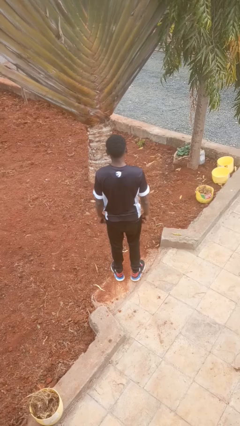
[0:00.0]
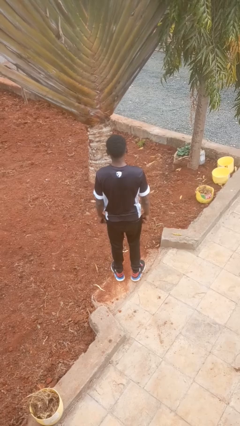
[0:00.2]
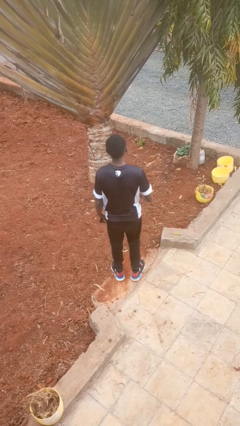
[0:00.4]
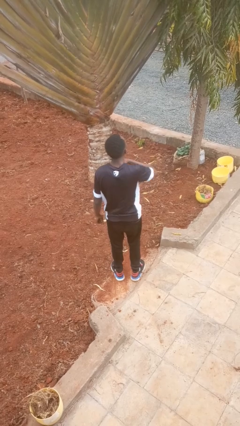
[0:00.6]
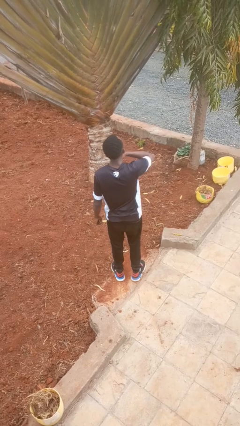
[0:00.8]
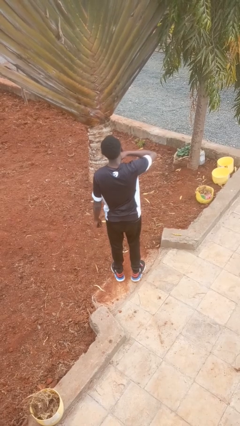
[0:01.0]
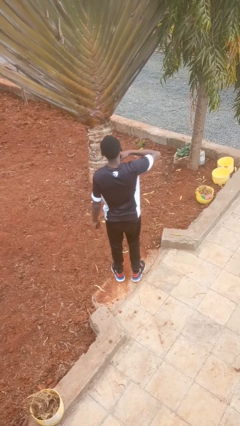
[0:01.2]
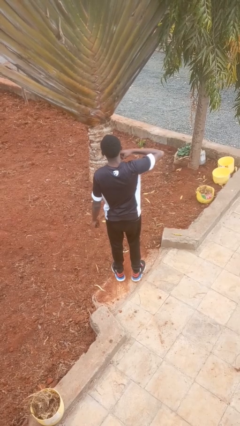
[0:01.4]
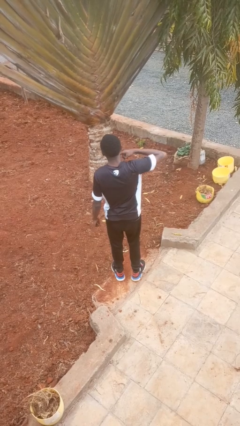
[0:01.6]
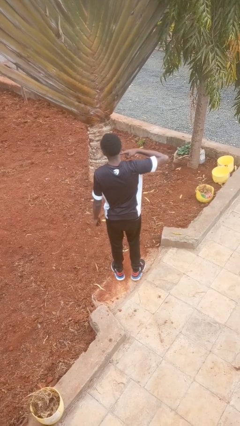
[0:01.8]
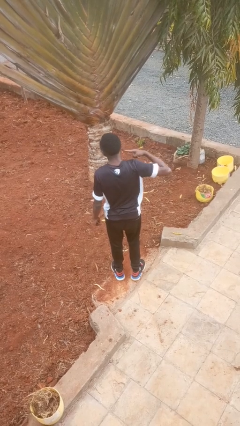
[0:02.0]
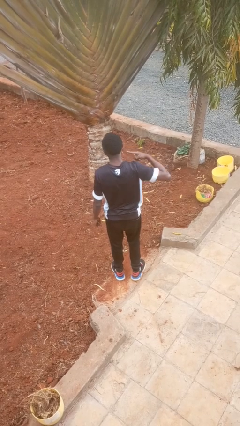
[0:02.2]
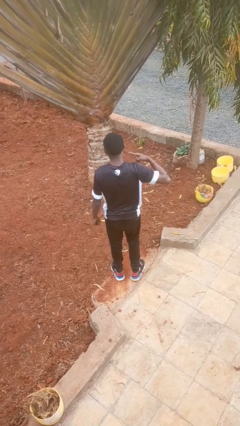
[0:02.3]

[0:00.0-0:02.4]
person gestures cut

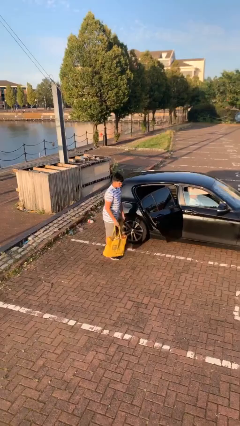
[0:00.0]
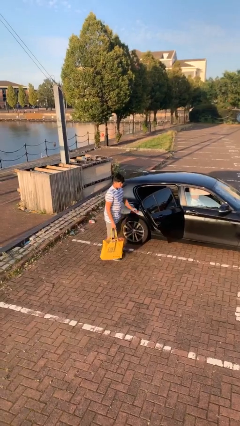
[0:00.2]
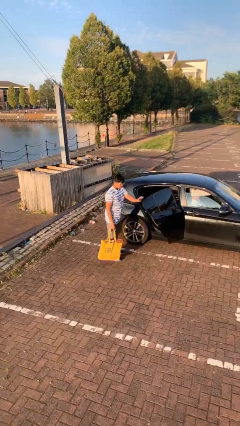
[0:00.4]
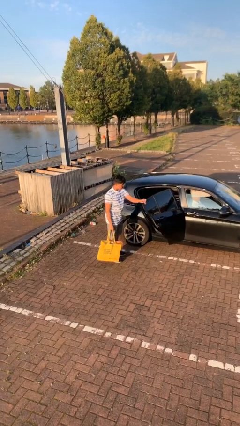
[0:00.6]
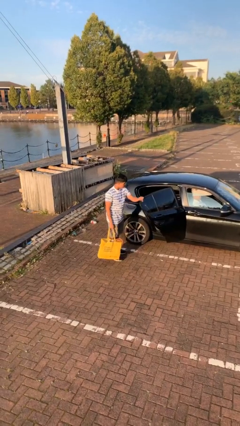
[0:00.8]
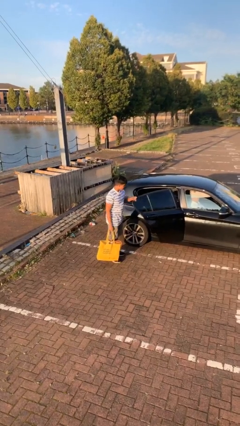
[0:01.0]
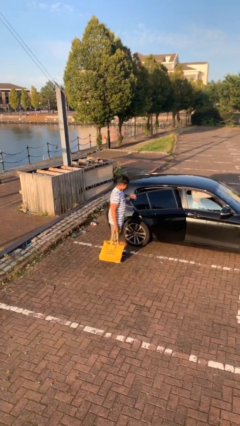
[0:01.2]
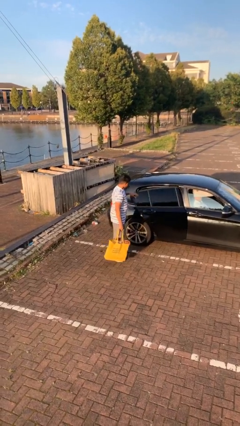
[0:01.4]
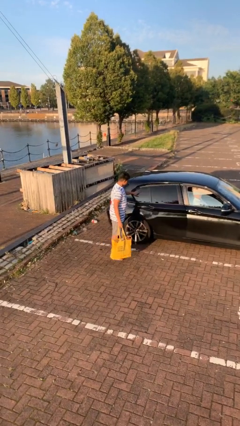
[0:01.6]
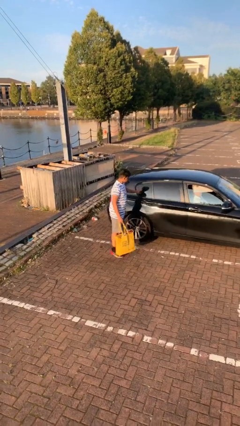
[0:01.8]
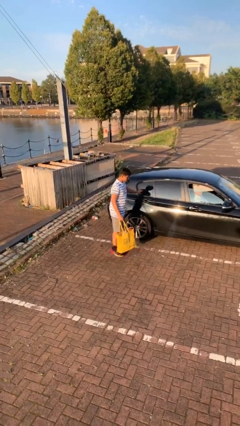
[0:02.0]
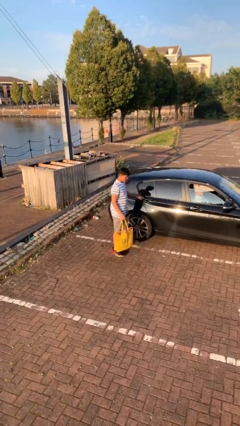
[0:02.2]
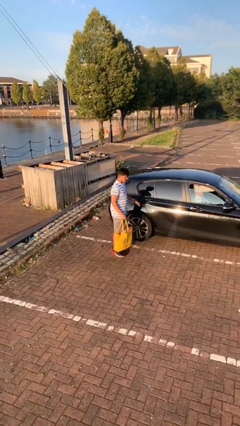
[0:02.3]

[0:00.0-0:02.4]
person closes car door

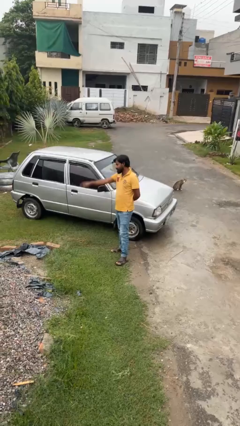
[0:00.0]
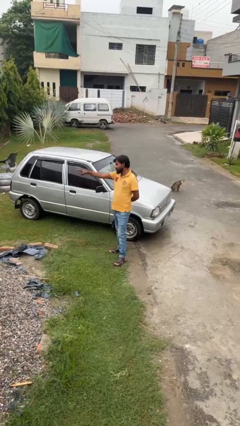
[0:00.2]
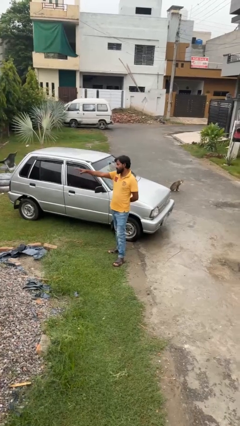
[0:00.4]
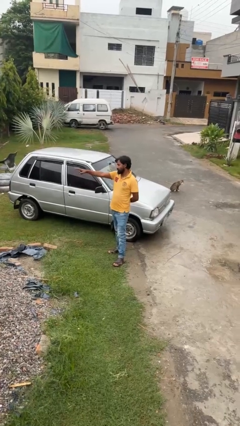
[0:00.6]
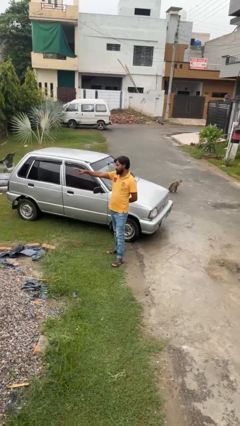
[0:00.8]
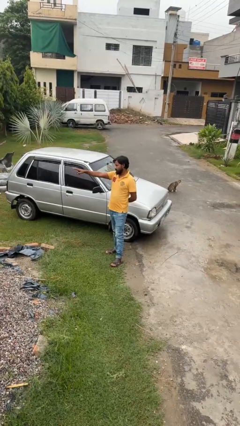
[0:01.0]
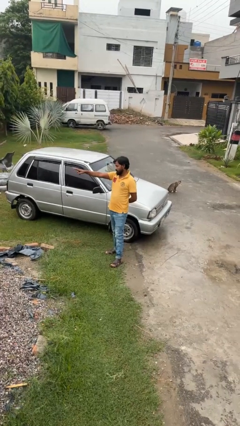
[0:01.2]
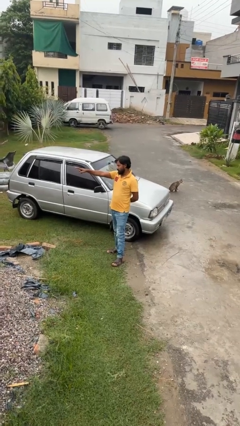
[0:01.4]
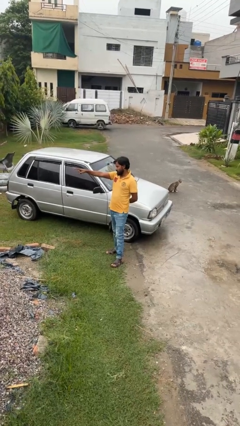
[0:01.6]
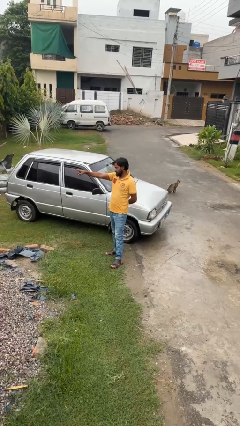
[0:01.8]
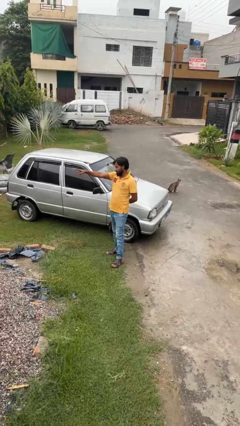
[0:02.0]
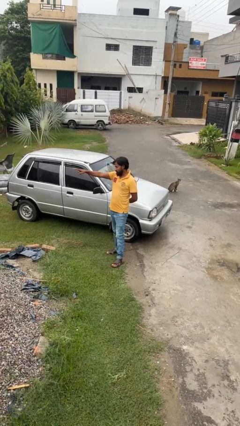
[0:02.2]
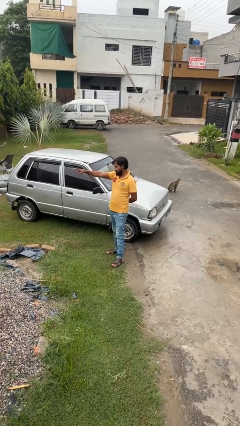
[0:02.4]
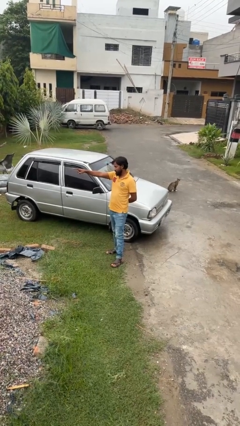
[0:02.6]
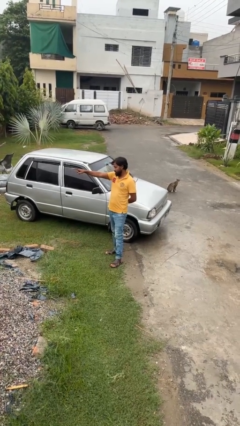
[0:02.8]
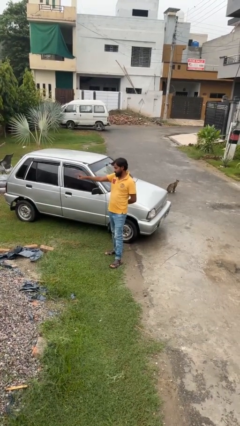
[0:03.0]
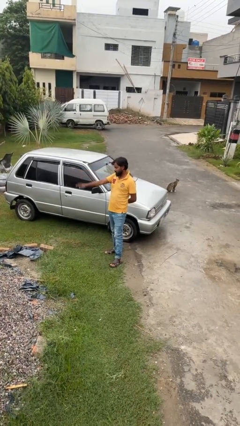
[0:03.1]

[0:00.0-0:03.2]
person points at person

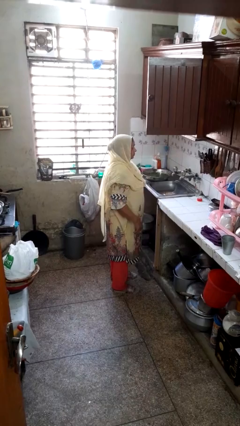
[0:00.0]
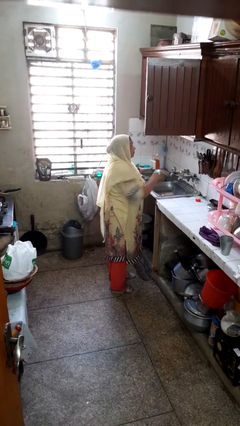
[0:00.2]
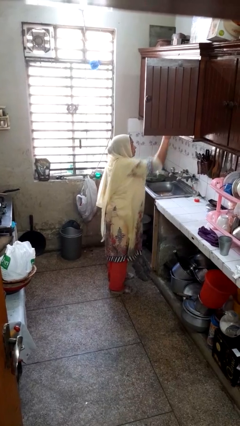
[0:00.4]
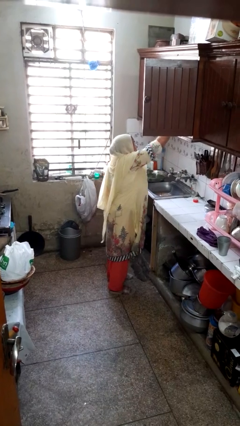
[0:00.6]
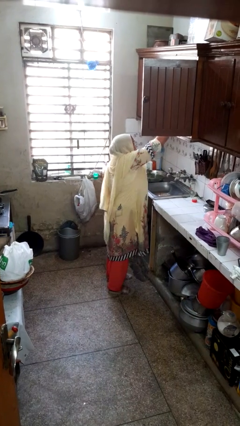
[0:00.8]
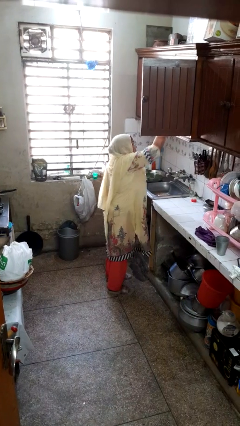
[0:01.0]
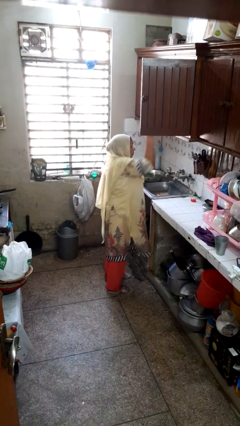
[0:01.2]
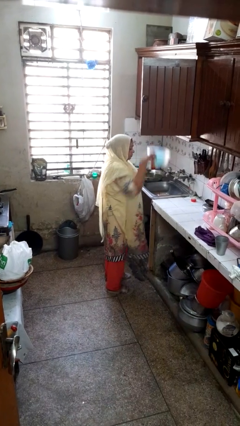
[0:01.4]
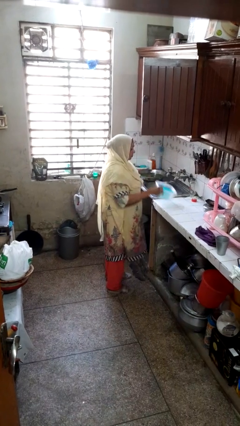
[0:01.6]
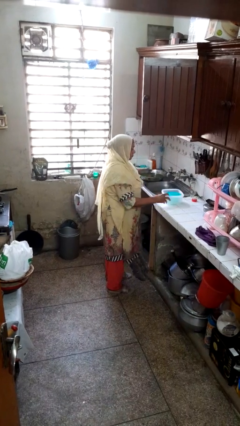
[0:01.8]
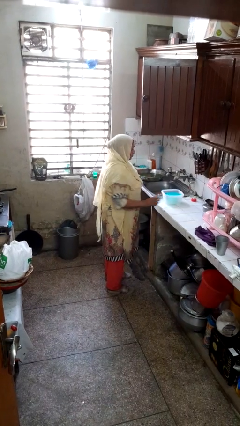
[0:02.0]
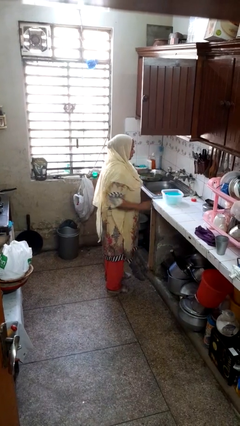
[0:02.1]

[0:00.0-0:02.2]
person takes object from cabinet

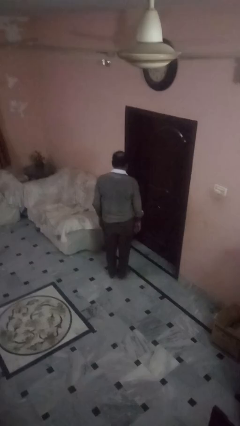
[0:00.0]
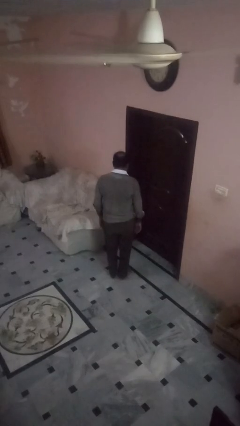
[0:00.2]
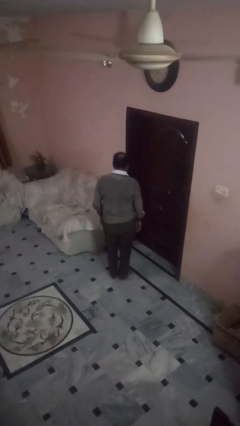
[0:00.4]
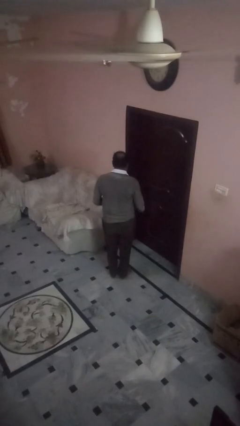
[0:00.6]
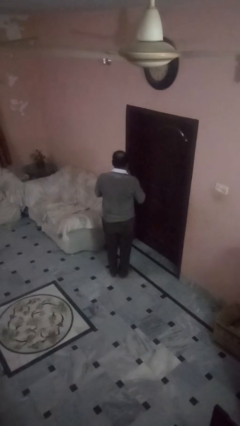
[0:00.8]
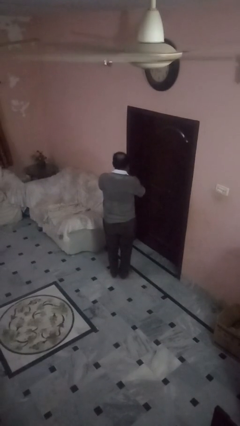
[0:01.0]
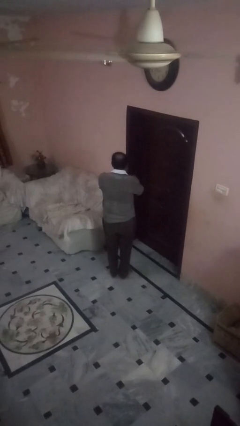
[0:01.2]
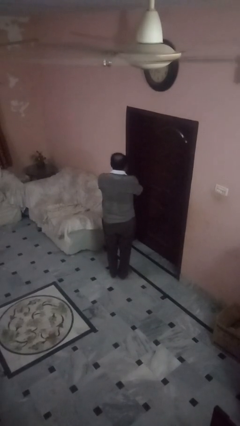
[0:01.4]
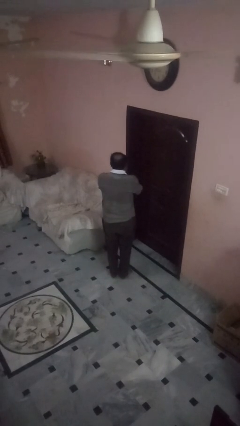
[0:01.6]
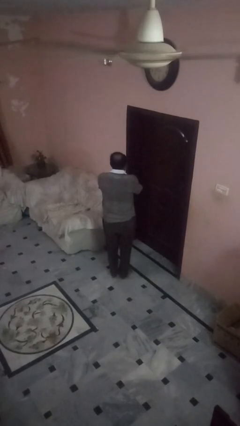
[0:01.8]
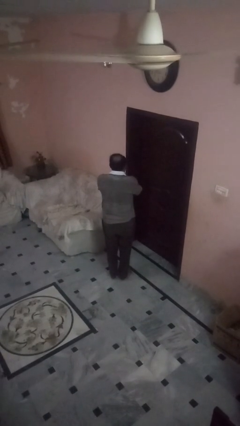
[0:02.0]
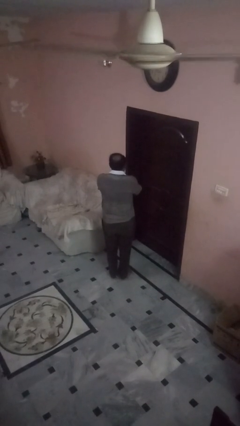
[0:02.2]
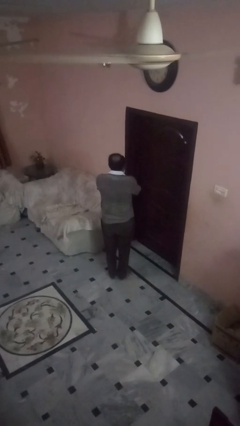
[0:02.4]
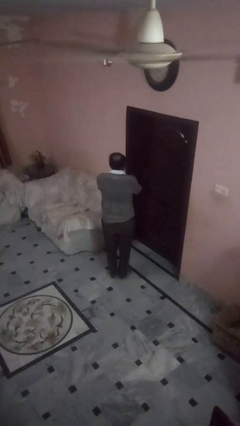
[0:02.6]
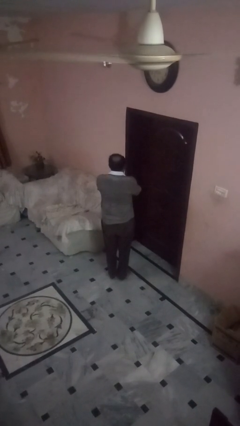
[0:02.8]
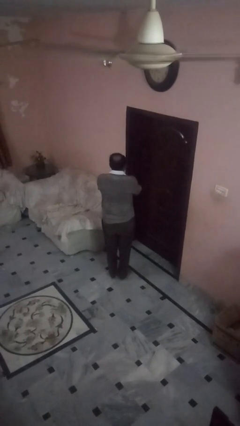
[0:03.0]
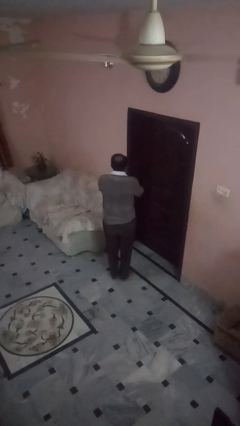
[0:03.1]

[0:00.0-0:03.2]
person covers face with hands

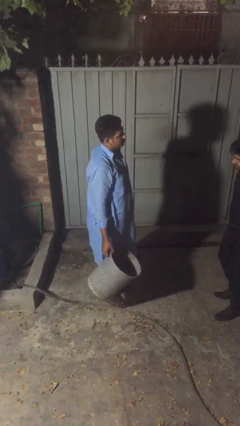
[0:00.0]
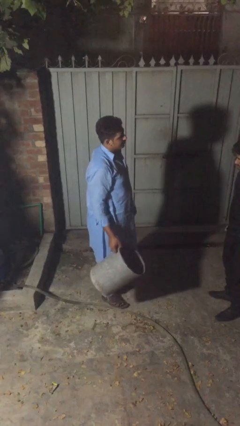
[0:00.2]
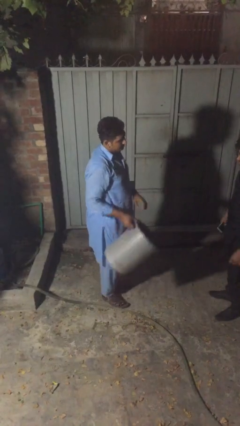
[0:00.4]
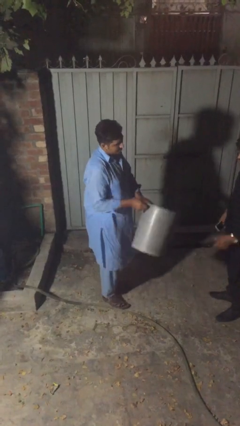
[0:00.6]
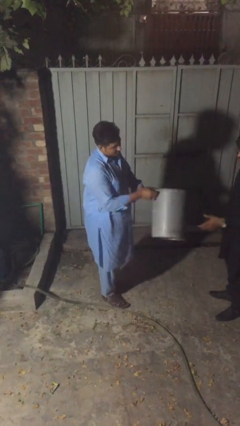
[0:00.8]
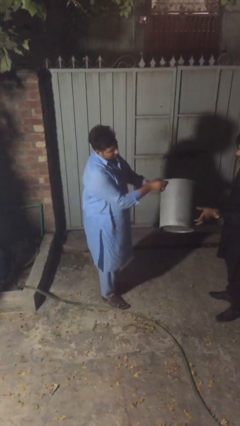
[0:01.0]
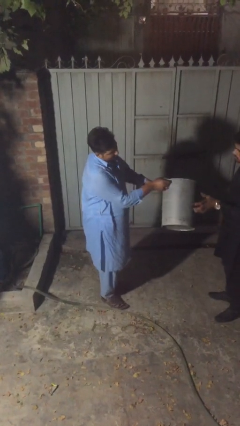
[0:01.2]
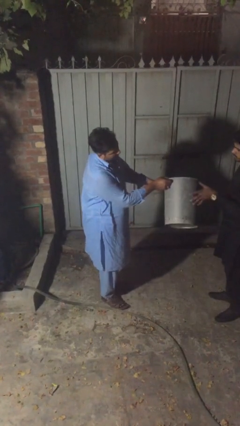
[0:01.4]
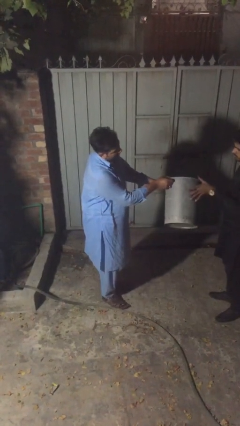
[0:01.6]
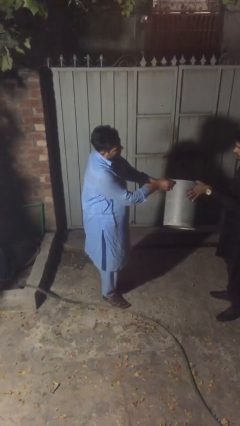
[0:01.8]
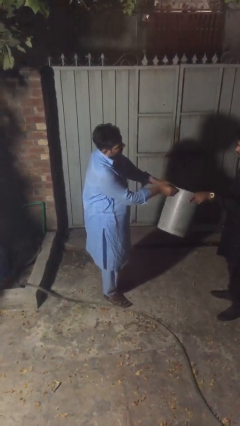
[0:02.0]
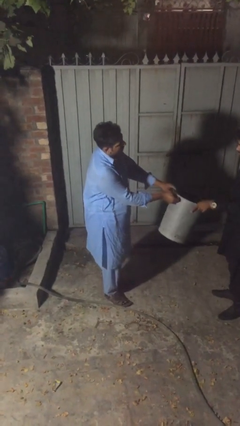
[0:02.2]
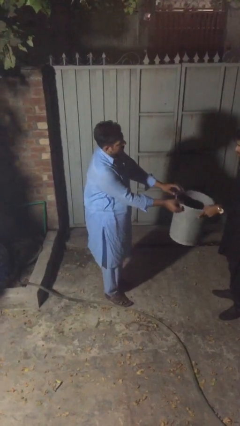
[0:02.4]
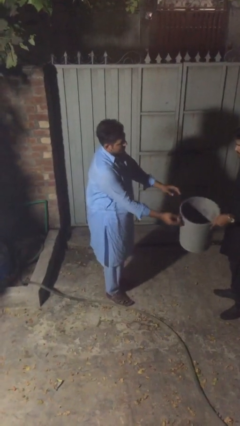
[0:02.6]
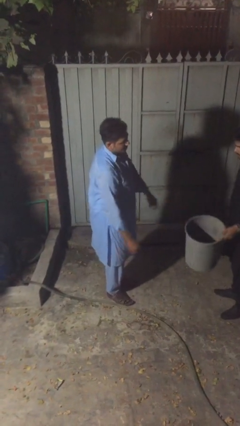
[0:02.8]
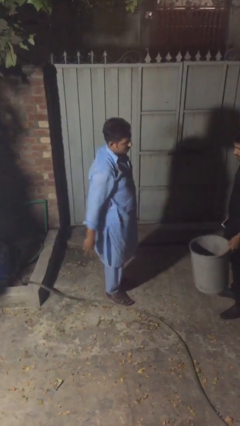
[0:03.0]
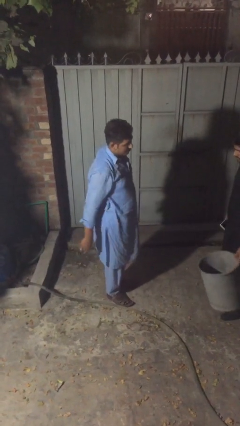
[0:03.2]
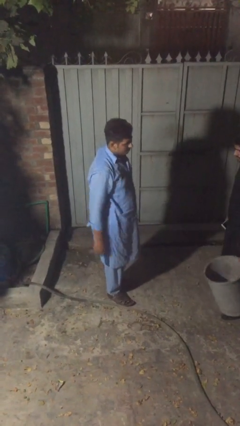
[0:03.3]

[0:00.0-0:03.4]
person transfers object to person

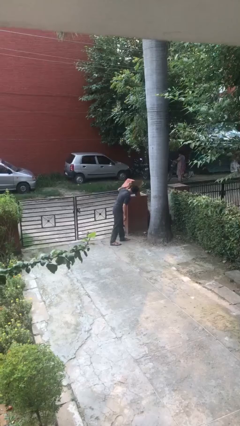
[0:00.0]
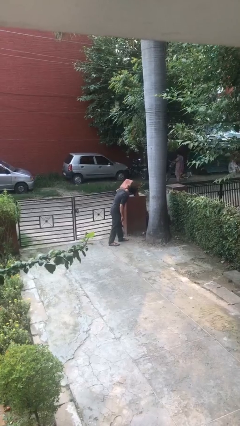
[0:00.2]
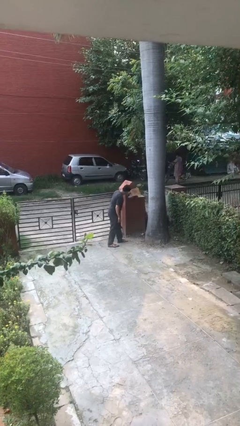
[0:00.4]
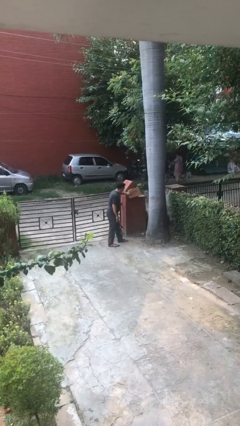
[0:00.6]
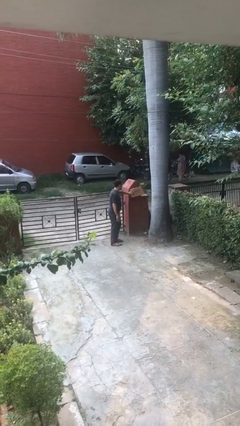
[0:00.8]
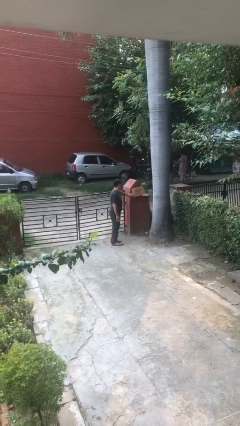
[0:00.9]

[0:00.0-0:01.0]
person closes mailbox
